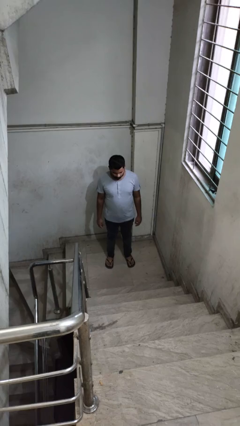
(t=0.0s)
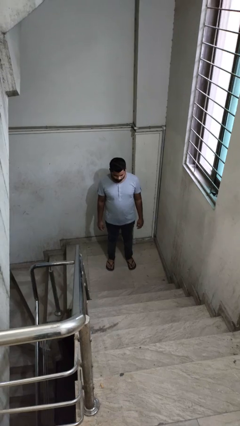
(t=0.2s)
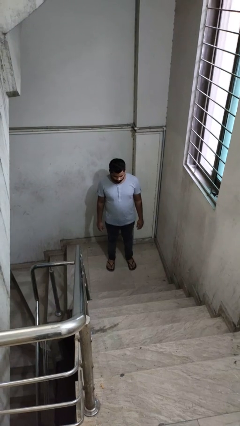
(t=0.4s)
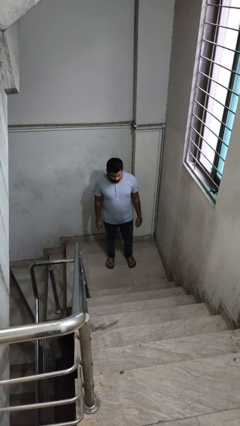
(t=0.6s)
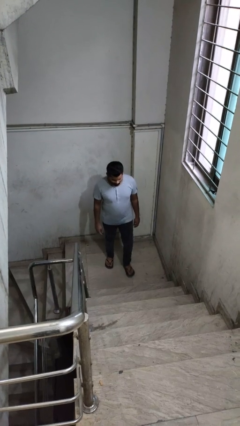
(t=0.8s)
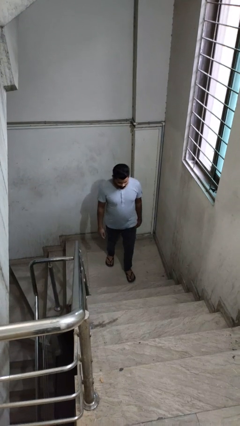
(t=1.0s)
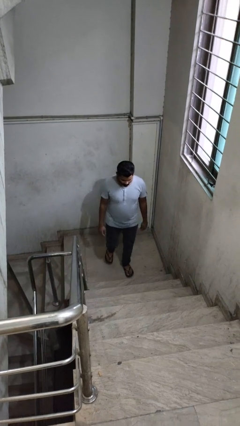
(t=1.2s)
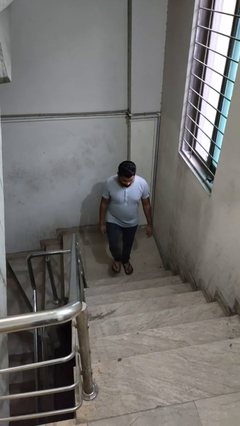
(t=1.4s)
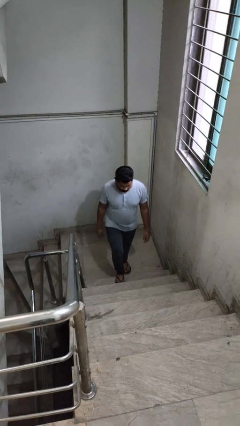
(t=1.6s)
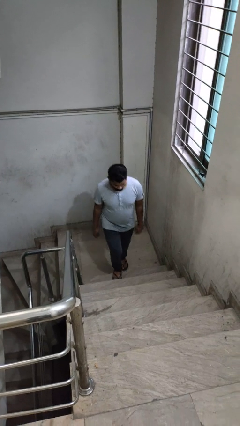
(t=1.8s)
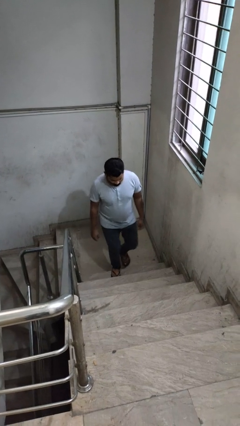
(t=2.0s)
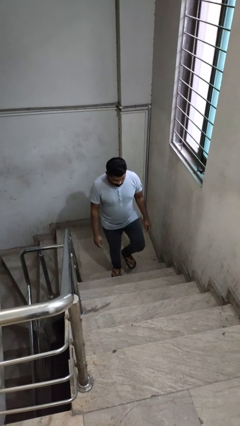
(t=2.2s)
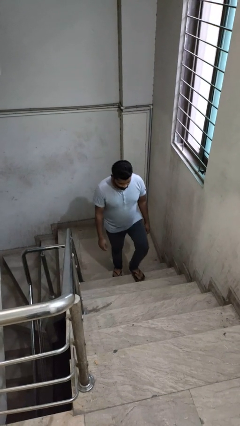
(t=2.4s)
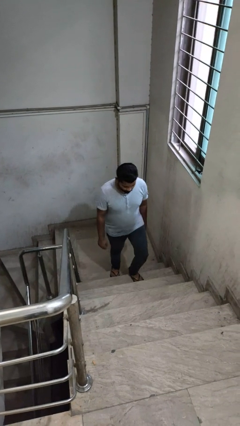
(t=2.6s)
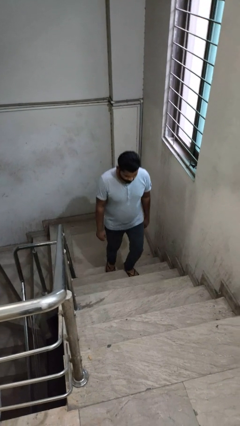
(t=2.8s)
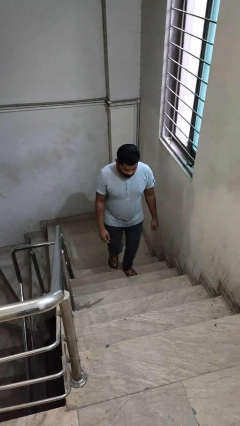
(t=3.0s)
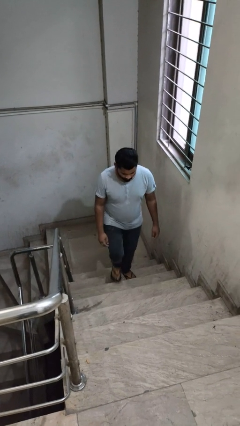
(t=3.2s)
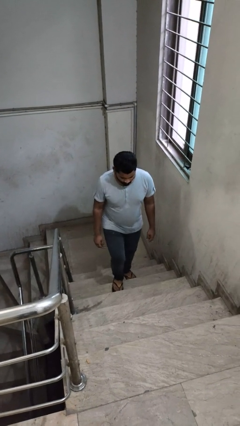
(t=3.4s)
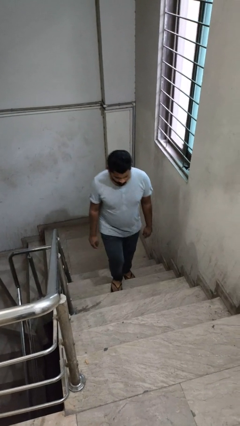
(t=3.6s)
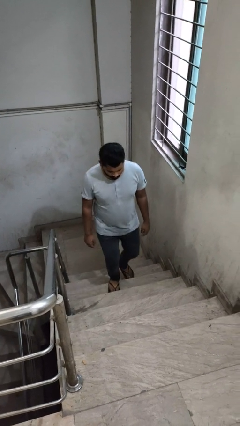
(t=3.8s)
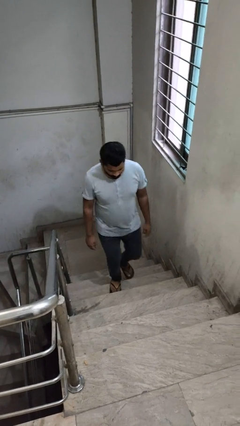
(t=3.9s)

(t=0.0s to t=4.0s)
person climbs up stairs

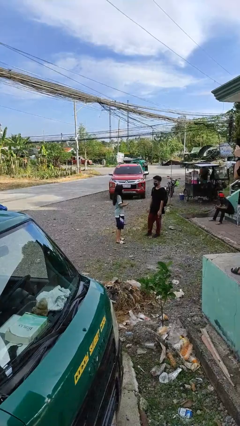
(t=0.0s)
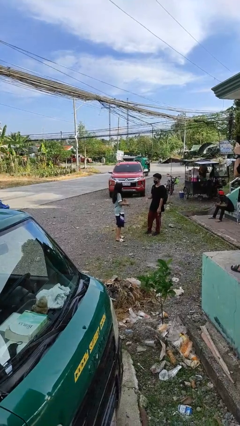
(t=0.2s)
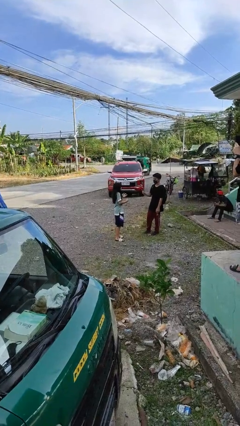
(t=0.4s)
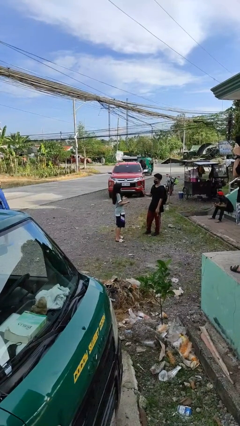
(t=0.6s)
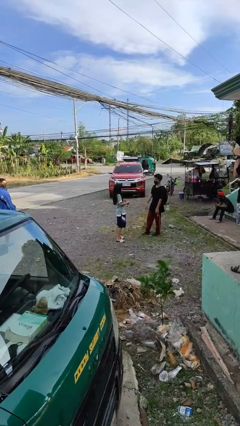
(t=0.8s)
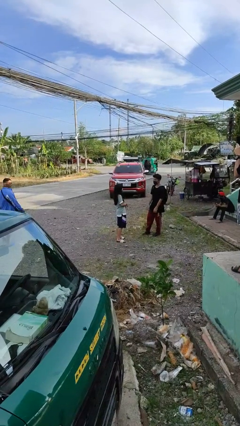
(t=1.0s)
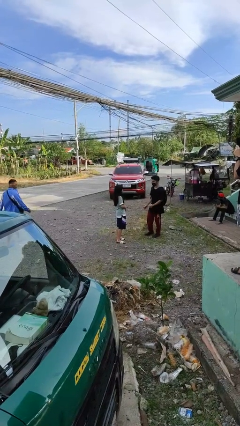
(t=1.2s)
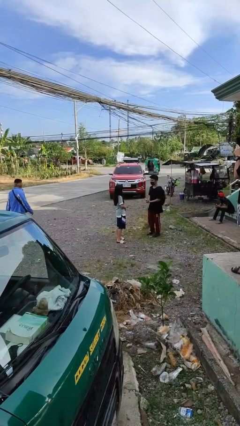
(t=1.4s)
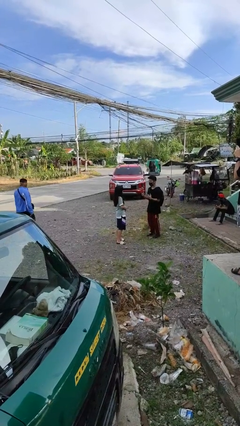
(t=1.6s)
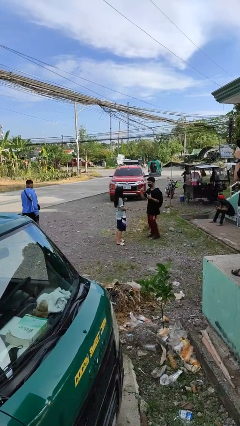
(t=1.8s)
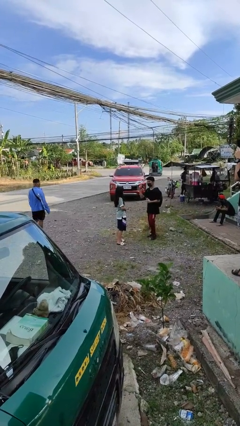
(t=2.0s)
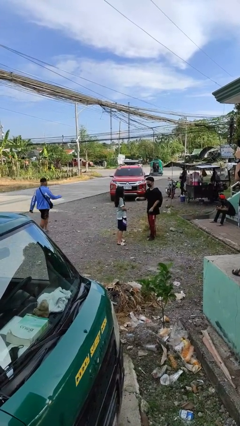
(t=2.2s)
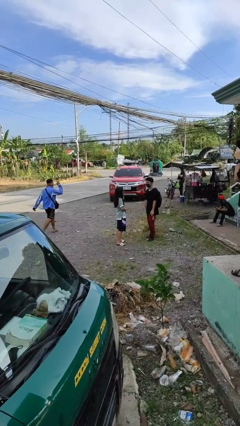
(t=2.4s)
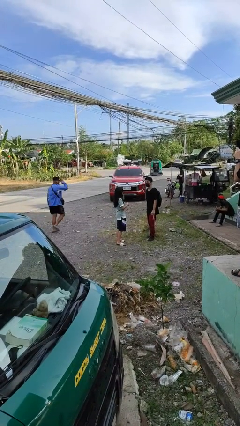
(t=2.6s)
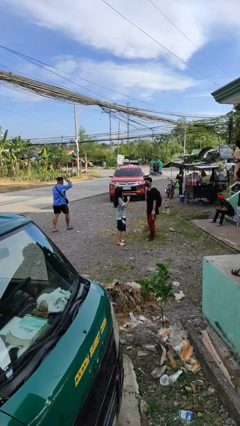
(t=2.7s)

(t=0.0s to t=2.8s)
person talks to person

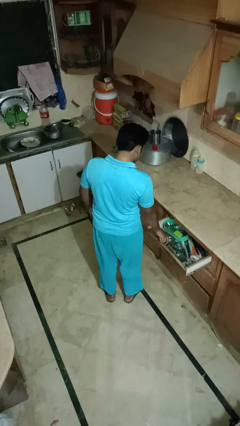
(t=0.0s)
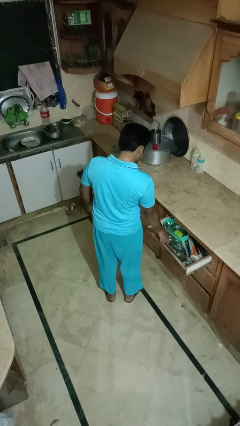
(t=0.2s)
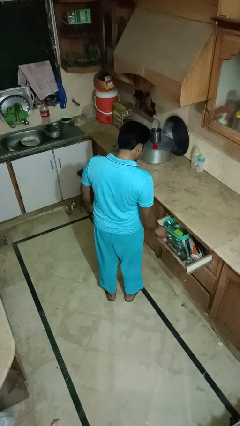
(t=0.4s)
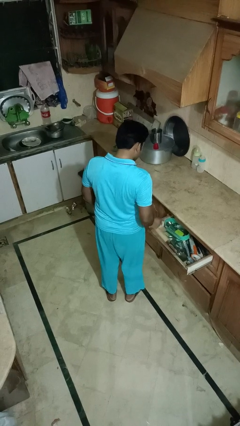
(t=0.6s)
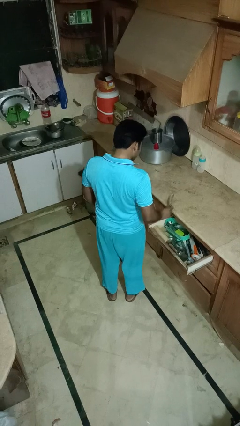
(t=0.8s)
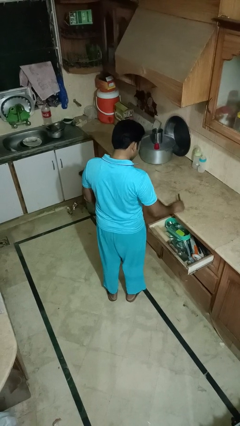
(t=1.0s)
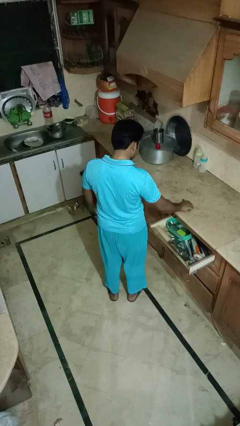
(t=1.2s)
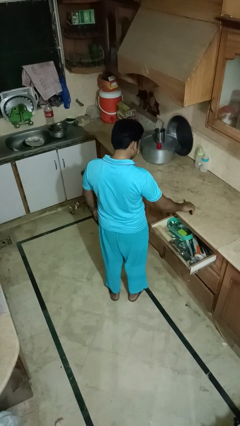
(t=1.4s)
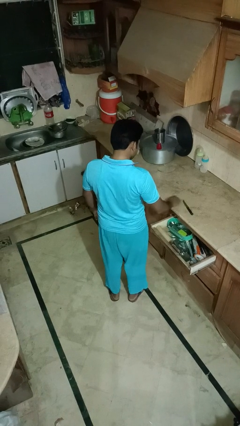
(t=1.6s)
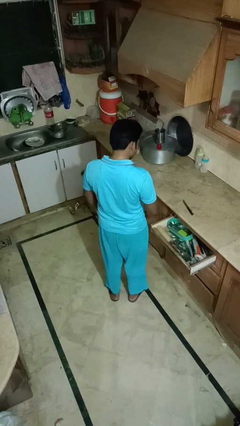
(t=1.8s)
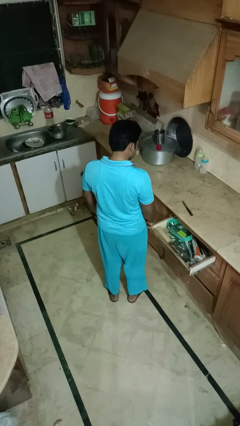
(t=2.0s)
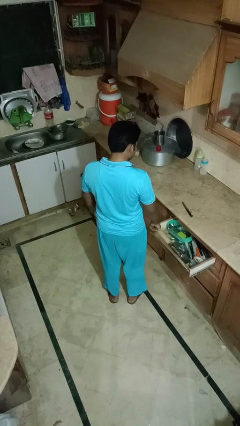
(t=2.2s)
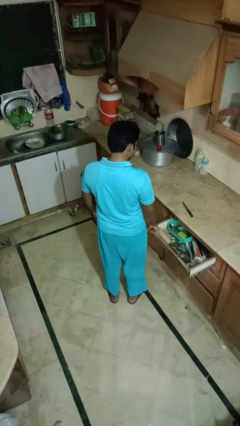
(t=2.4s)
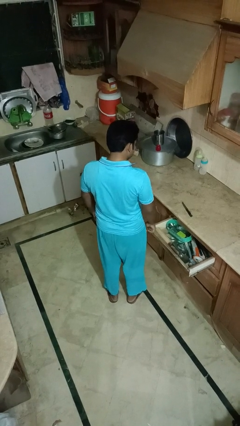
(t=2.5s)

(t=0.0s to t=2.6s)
person takes object from kitchen drawer

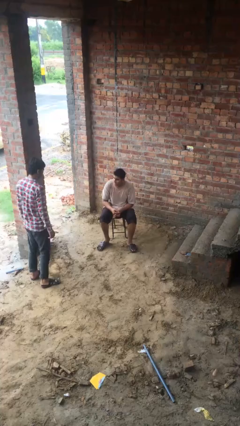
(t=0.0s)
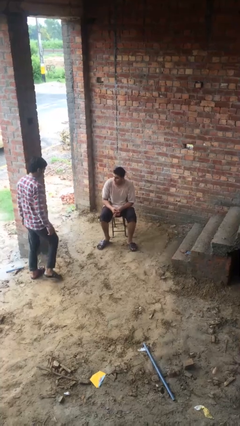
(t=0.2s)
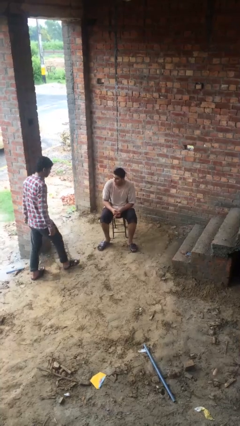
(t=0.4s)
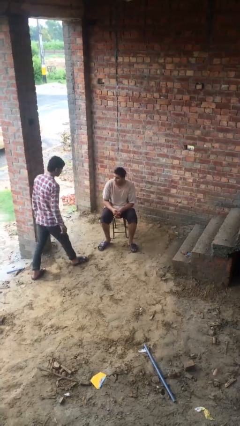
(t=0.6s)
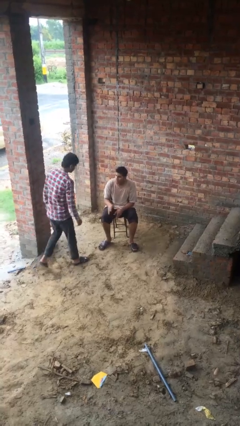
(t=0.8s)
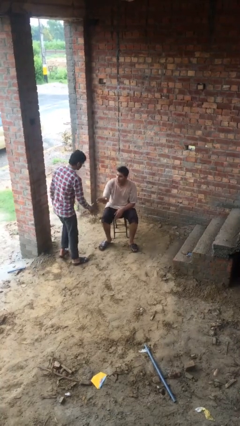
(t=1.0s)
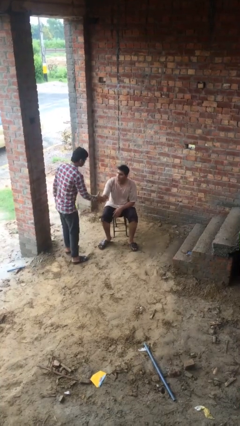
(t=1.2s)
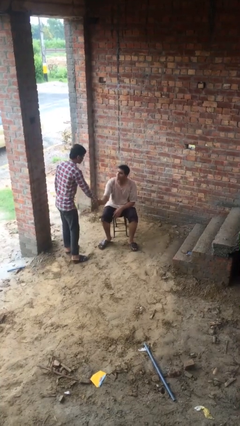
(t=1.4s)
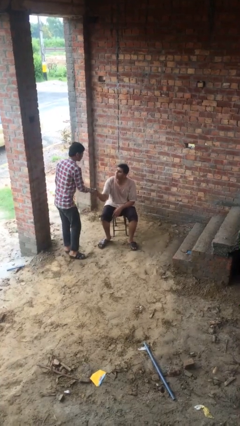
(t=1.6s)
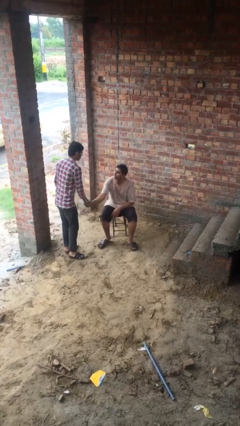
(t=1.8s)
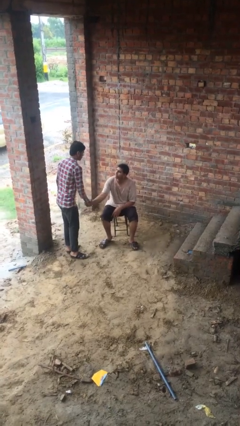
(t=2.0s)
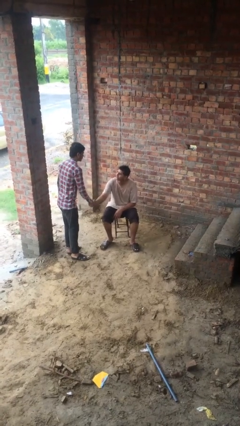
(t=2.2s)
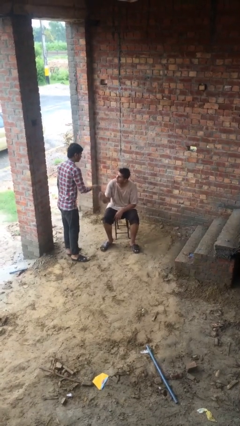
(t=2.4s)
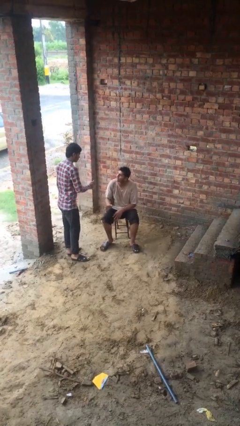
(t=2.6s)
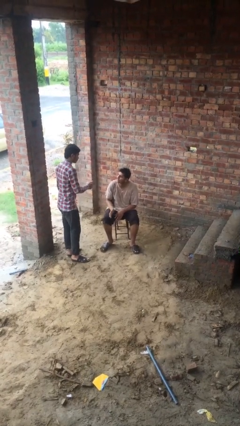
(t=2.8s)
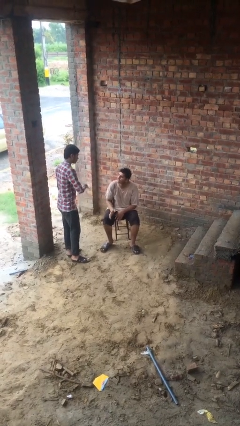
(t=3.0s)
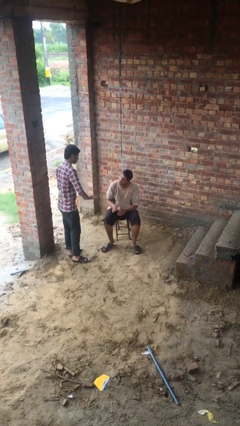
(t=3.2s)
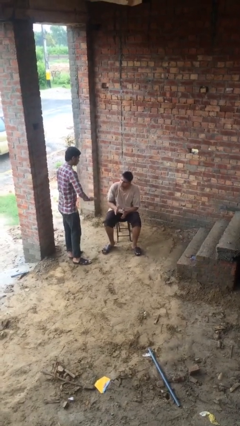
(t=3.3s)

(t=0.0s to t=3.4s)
person shakes hand

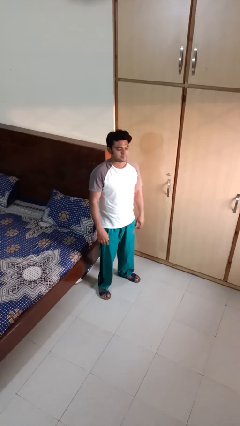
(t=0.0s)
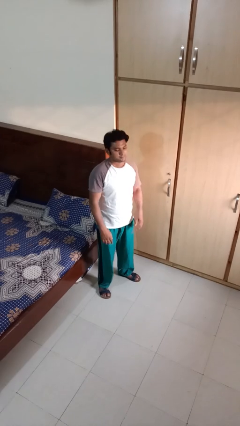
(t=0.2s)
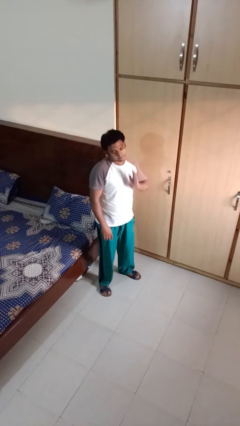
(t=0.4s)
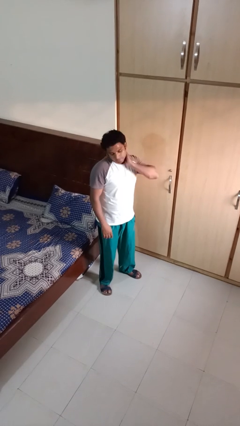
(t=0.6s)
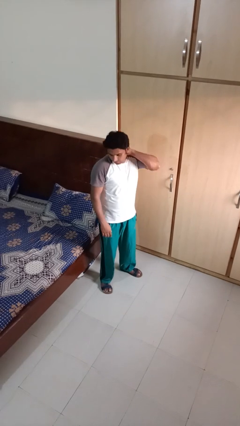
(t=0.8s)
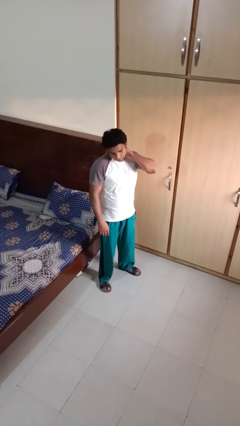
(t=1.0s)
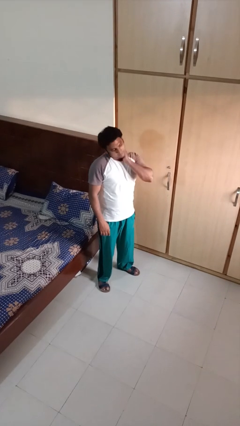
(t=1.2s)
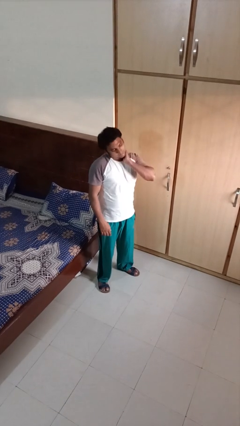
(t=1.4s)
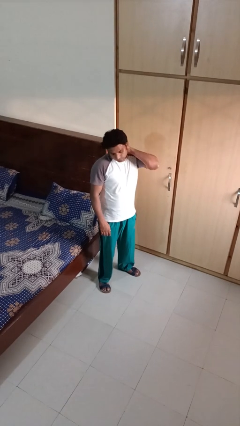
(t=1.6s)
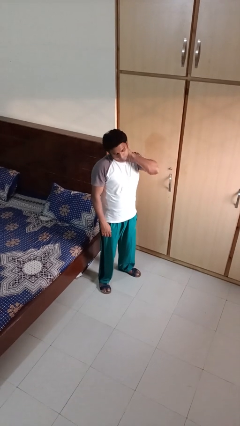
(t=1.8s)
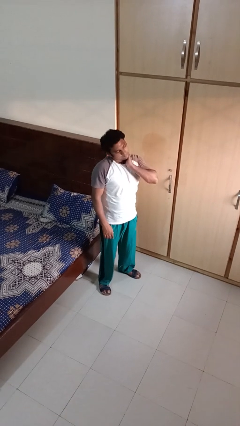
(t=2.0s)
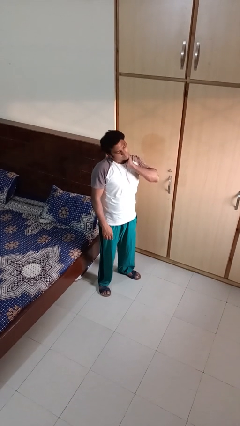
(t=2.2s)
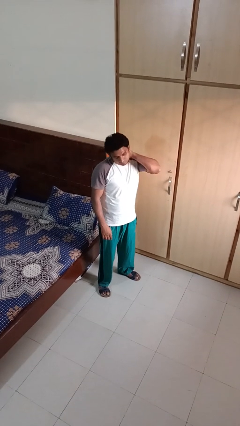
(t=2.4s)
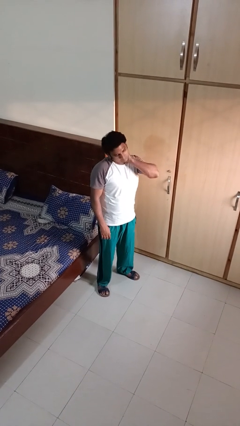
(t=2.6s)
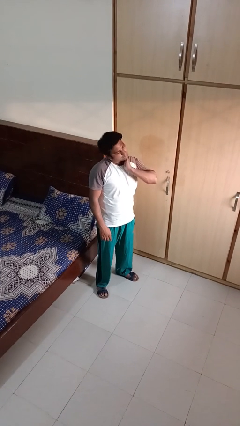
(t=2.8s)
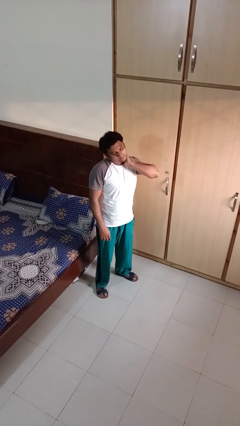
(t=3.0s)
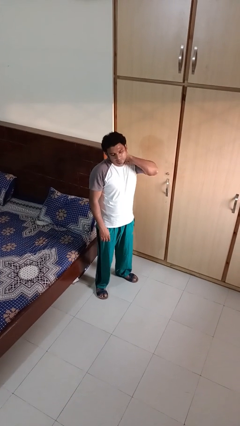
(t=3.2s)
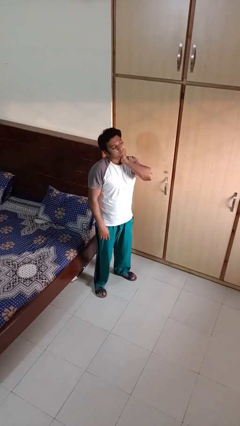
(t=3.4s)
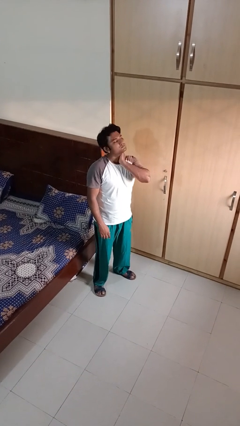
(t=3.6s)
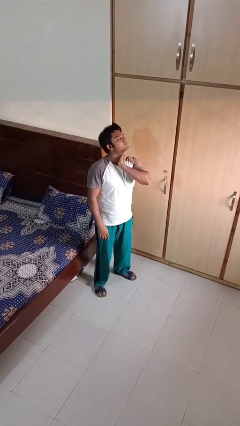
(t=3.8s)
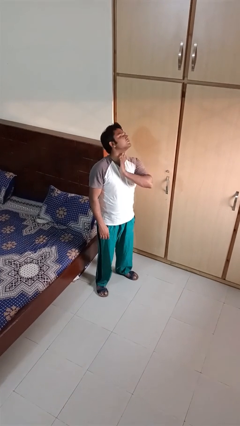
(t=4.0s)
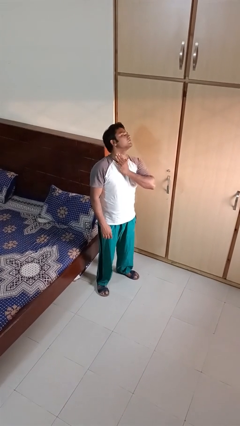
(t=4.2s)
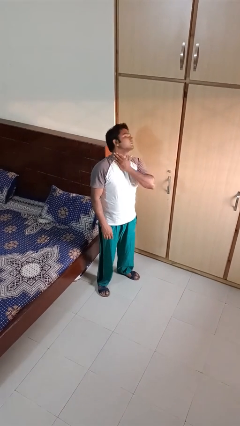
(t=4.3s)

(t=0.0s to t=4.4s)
person rubs neck
